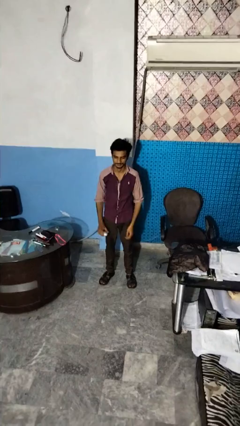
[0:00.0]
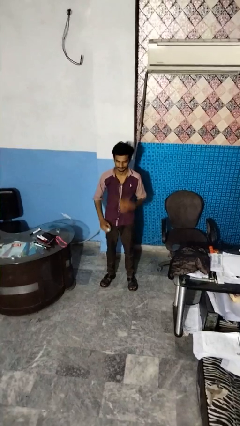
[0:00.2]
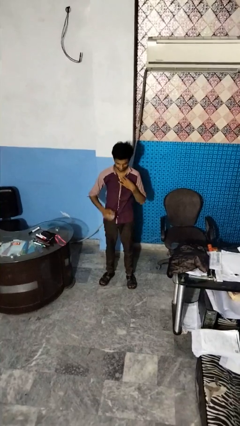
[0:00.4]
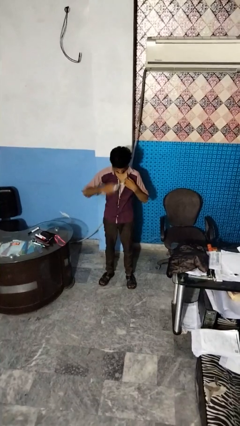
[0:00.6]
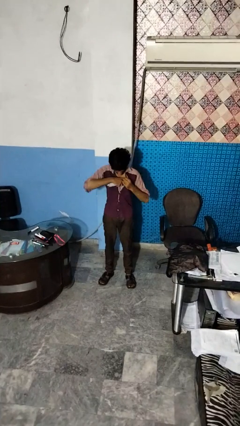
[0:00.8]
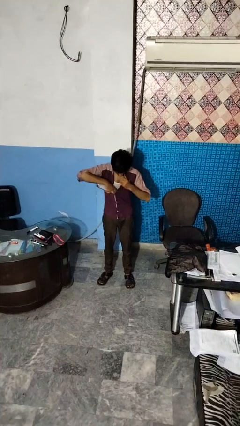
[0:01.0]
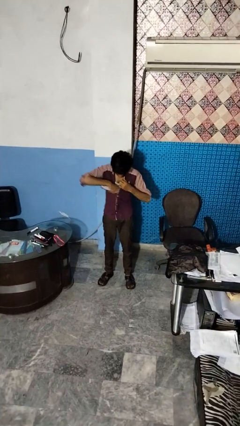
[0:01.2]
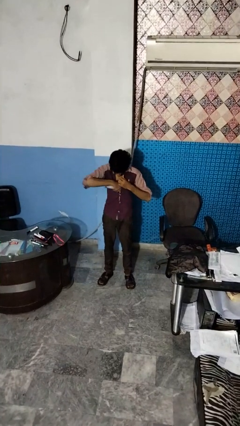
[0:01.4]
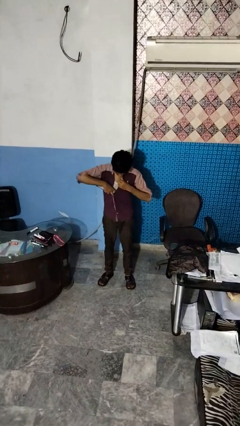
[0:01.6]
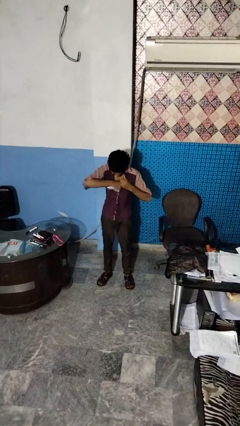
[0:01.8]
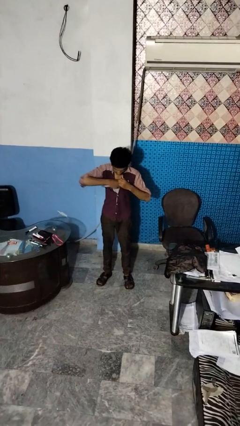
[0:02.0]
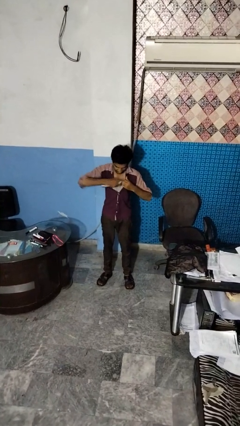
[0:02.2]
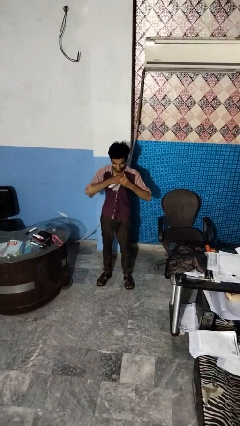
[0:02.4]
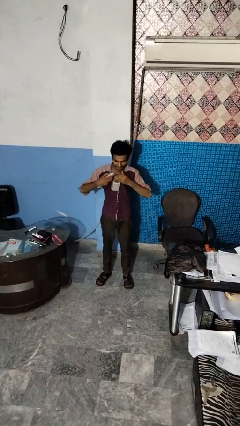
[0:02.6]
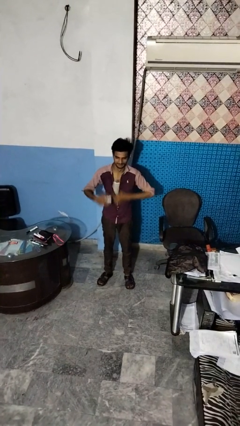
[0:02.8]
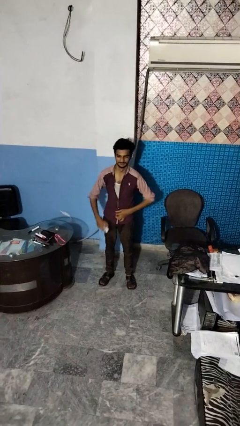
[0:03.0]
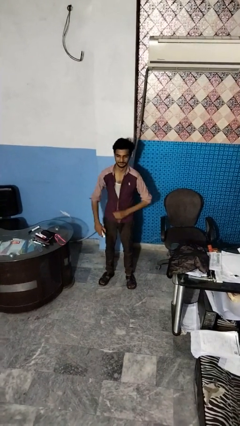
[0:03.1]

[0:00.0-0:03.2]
person applies deodorant

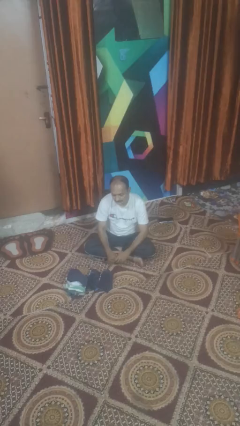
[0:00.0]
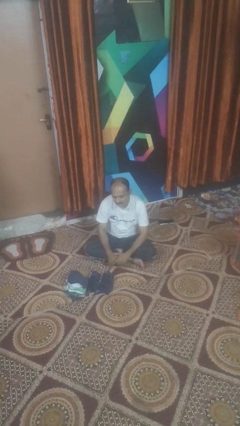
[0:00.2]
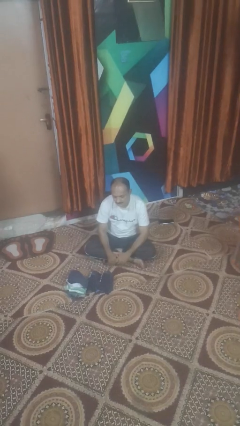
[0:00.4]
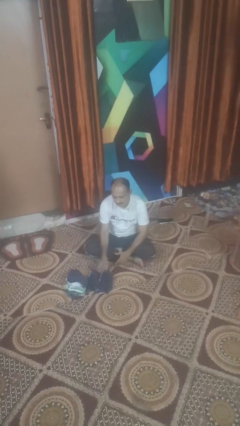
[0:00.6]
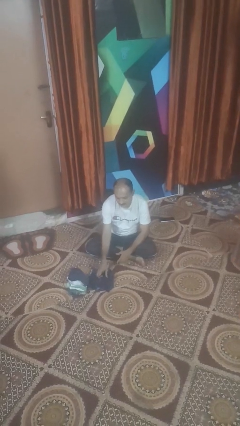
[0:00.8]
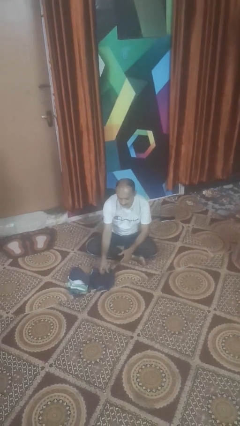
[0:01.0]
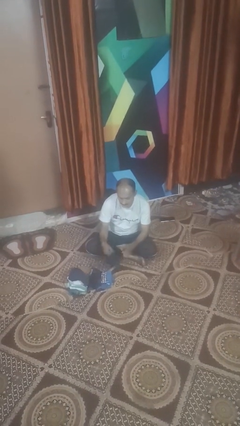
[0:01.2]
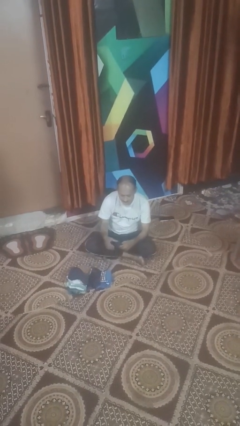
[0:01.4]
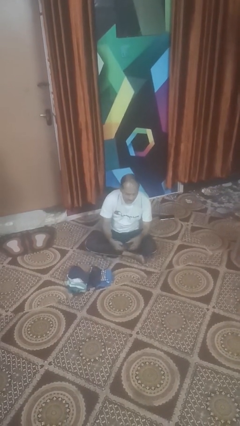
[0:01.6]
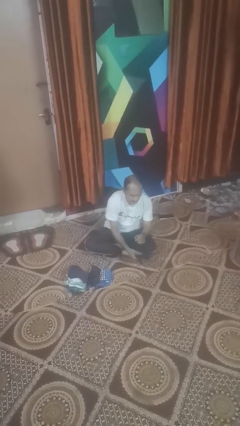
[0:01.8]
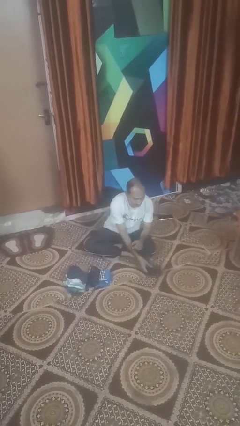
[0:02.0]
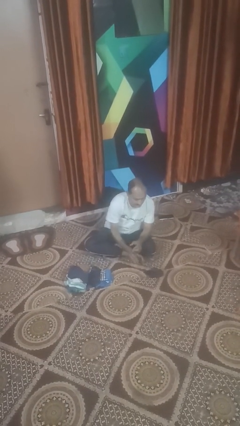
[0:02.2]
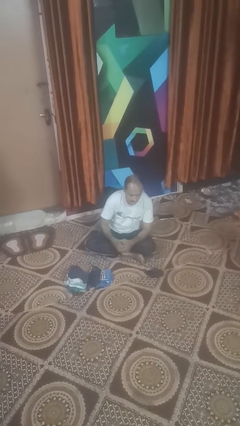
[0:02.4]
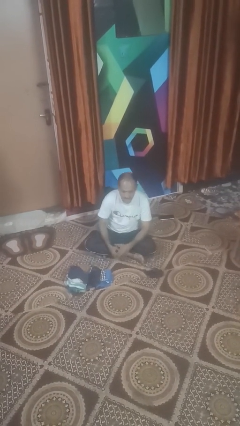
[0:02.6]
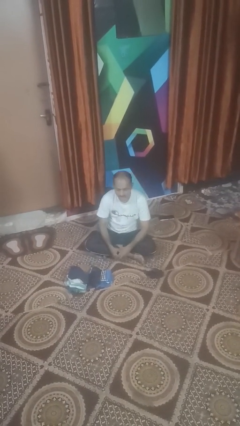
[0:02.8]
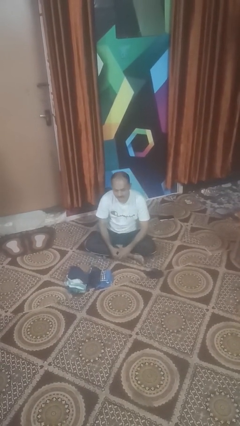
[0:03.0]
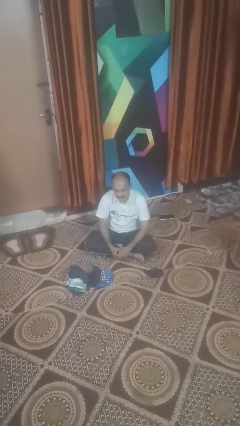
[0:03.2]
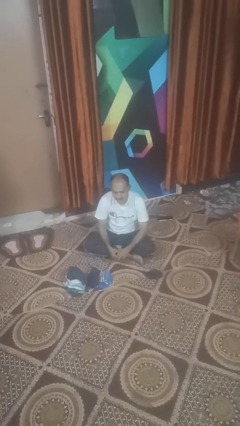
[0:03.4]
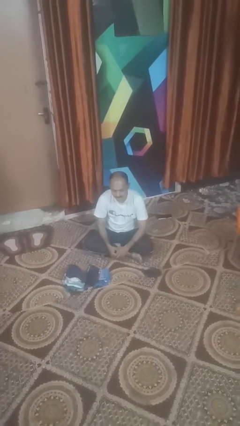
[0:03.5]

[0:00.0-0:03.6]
person folds socks

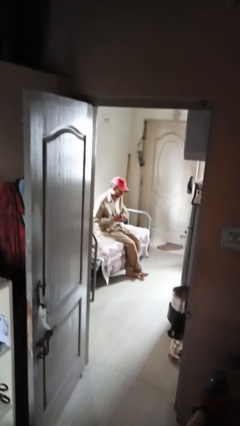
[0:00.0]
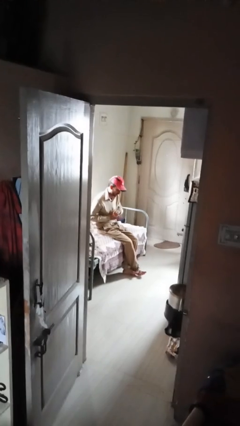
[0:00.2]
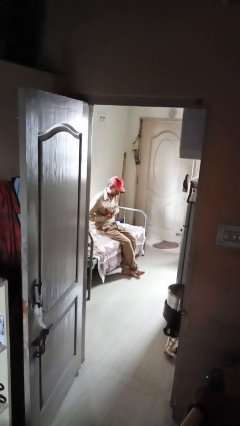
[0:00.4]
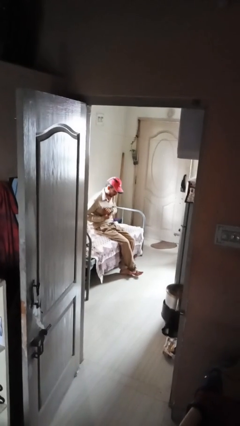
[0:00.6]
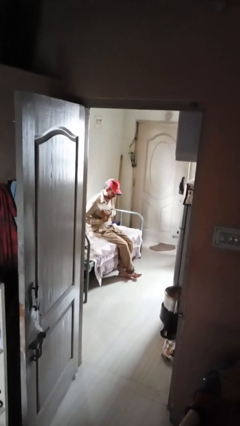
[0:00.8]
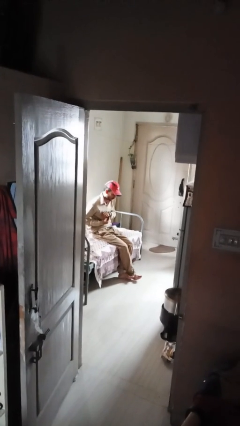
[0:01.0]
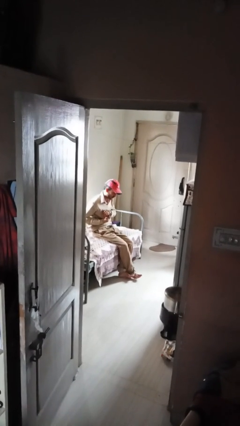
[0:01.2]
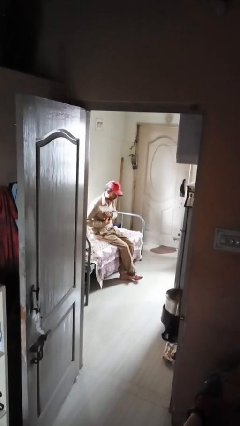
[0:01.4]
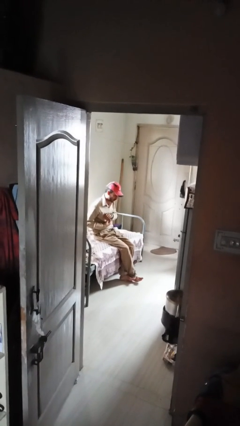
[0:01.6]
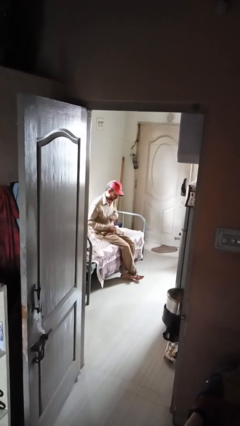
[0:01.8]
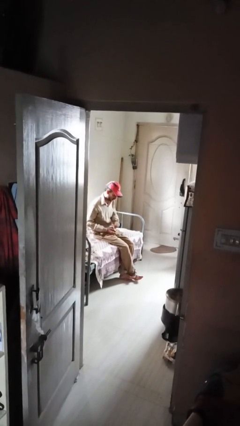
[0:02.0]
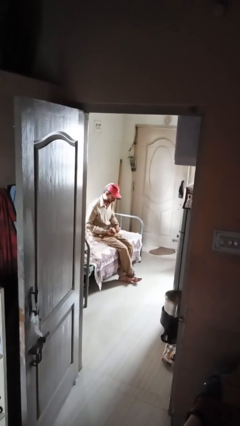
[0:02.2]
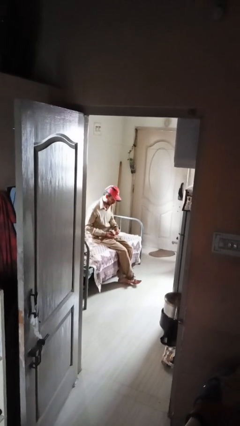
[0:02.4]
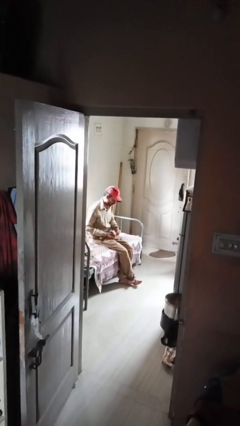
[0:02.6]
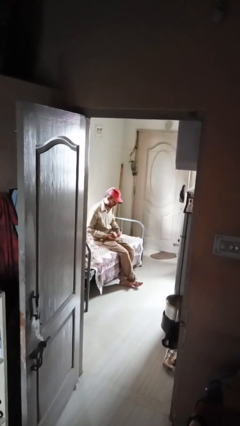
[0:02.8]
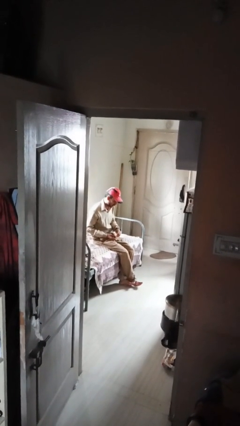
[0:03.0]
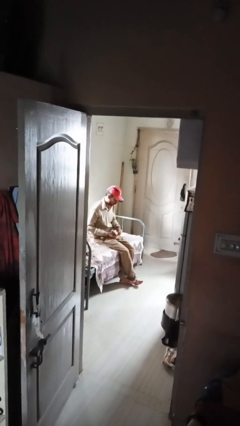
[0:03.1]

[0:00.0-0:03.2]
person puts on wristwatch

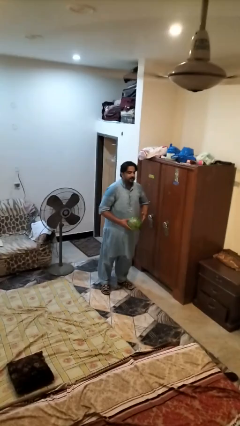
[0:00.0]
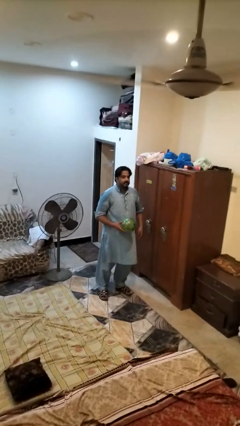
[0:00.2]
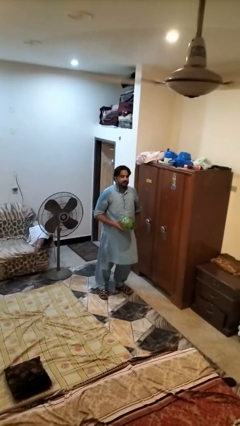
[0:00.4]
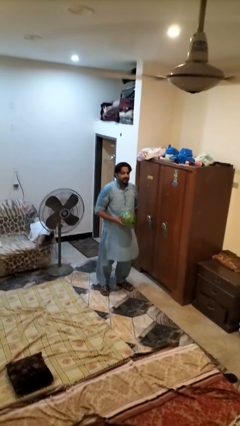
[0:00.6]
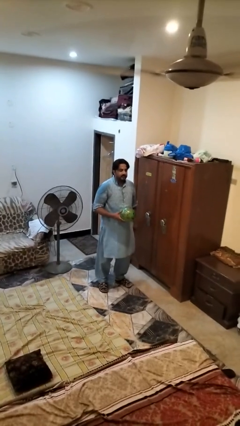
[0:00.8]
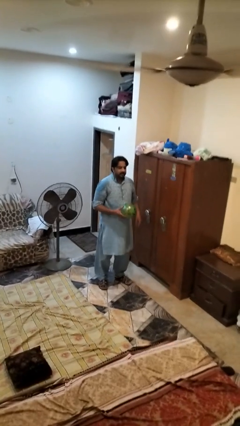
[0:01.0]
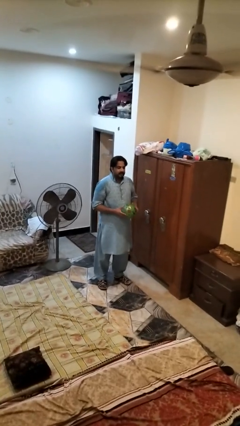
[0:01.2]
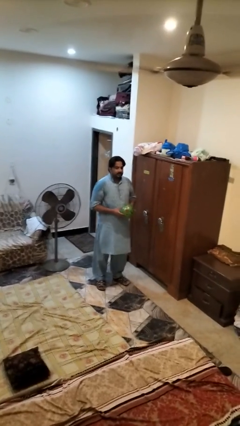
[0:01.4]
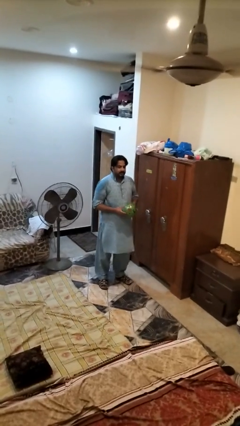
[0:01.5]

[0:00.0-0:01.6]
person picks up object from floor

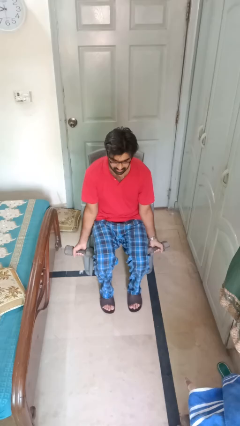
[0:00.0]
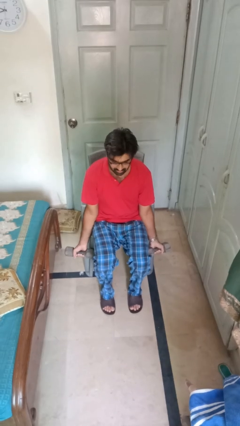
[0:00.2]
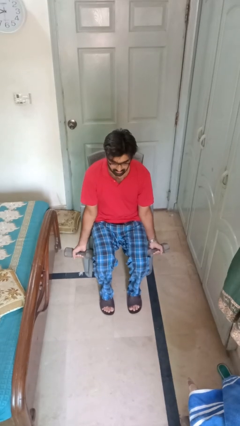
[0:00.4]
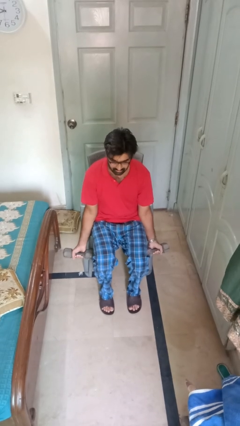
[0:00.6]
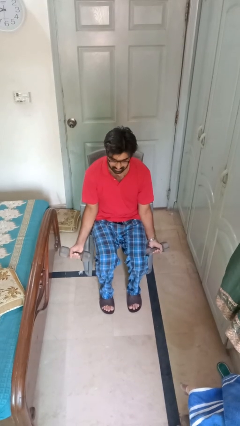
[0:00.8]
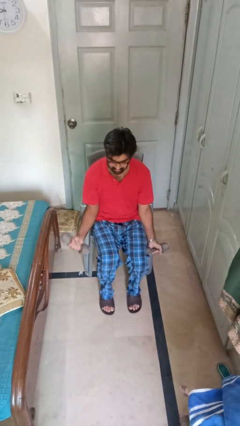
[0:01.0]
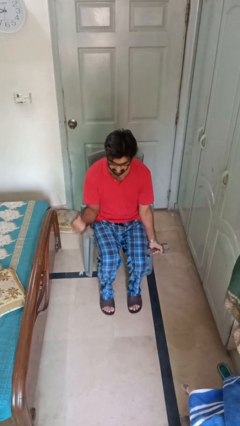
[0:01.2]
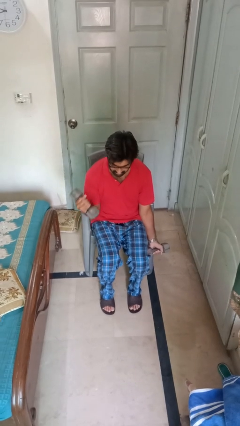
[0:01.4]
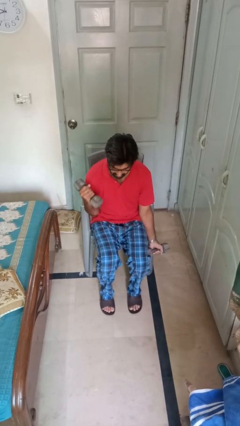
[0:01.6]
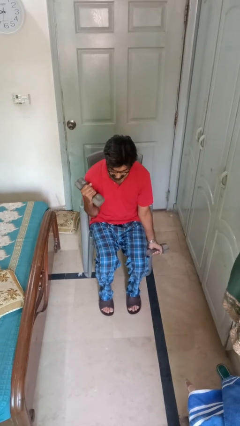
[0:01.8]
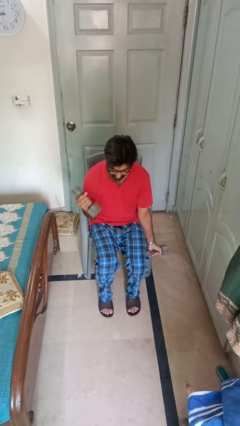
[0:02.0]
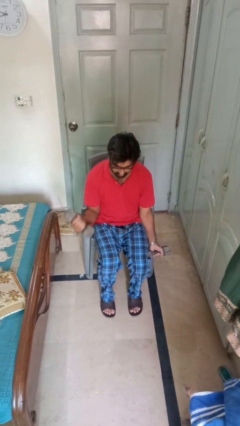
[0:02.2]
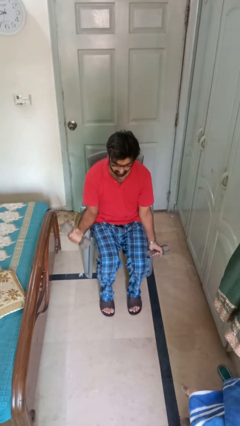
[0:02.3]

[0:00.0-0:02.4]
person lifts dumbbells

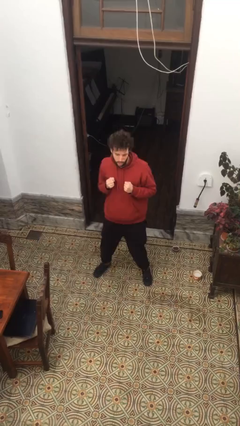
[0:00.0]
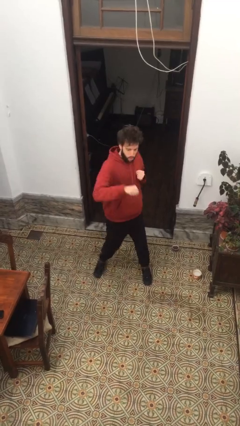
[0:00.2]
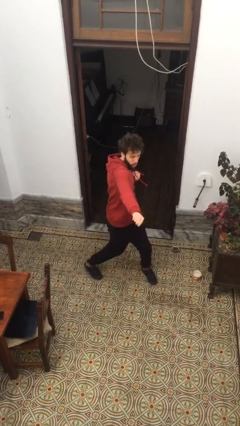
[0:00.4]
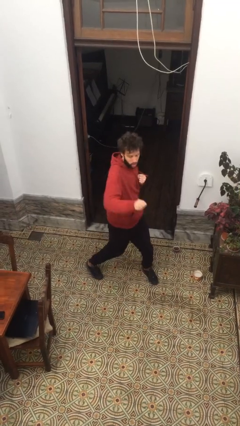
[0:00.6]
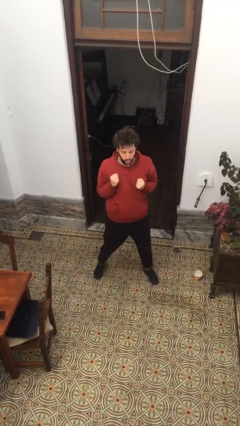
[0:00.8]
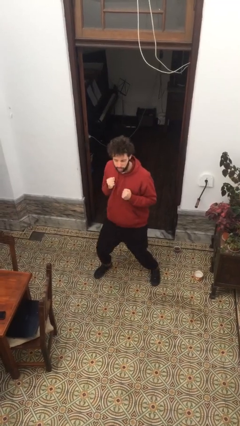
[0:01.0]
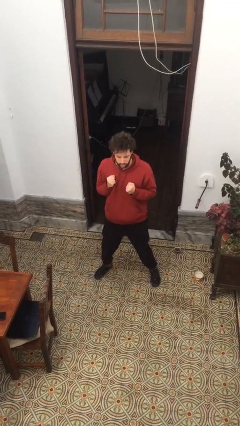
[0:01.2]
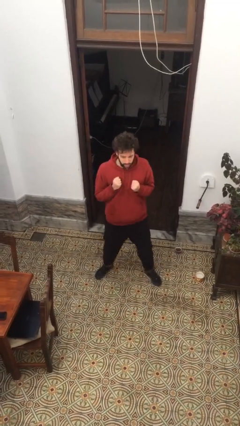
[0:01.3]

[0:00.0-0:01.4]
person punches

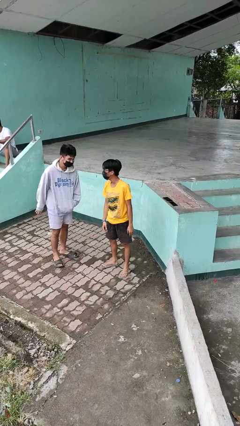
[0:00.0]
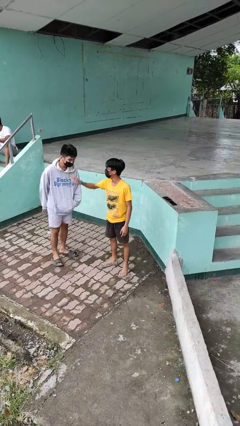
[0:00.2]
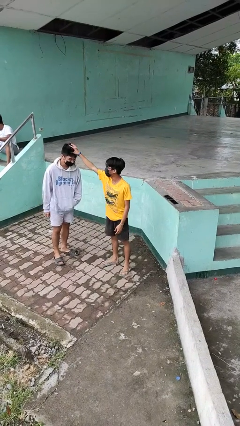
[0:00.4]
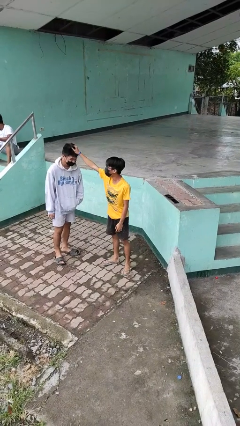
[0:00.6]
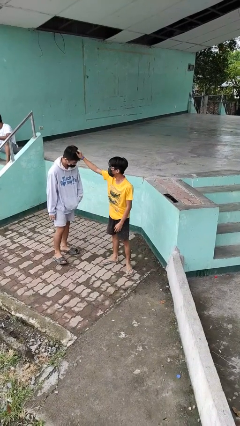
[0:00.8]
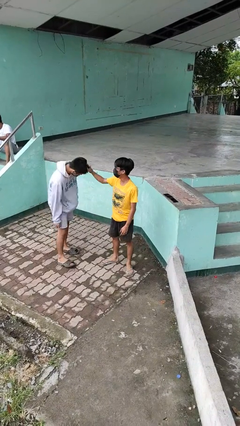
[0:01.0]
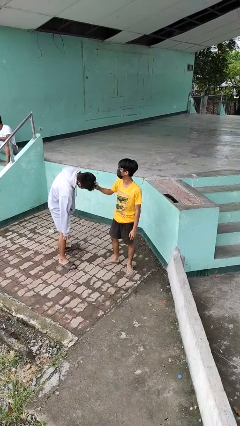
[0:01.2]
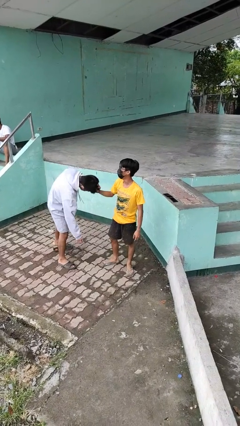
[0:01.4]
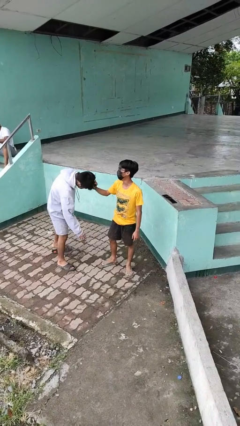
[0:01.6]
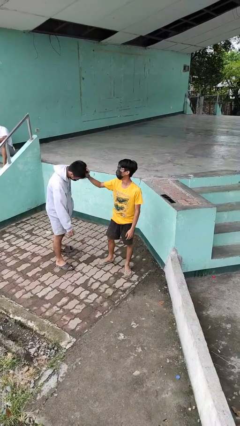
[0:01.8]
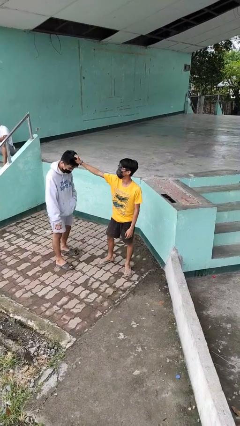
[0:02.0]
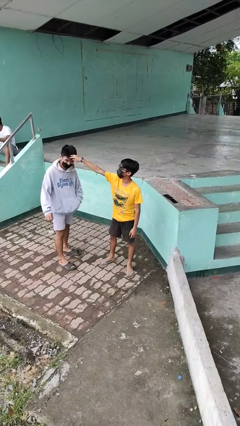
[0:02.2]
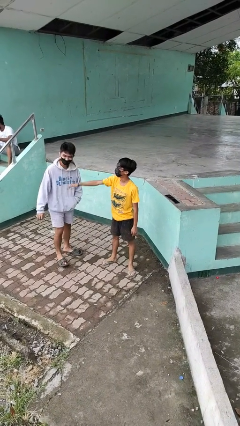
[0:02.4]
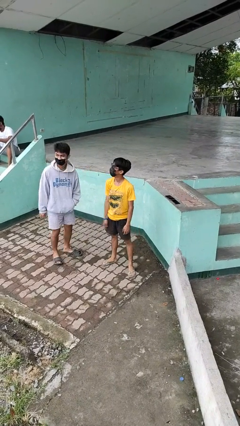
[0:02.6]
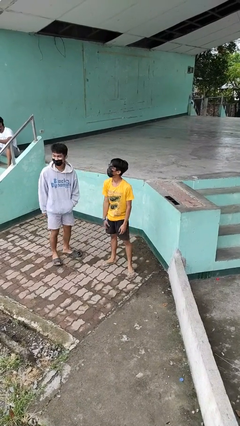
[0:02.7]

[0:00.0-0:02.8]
person grabs person by hair
